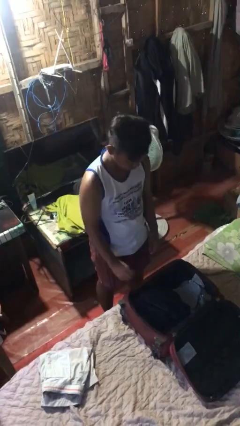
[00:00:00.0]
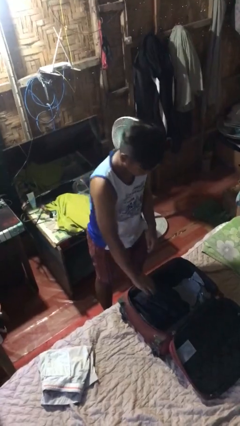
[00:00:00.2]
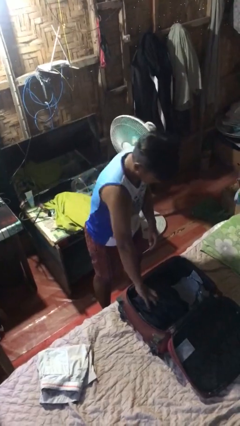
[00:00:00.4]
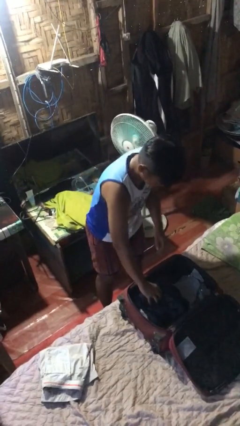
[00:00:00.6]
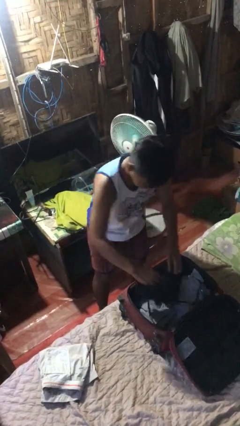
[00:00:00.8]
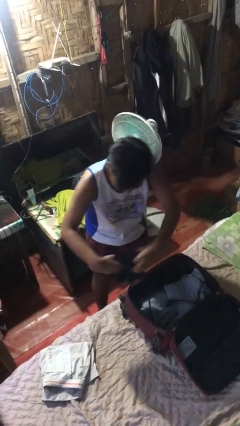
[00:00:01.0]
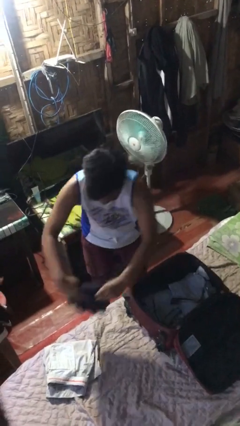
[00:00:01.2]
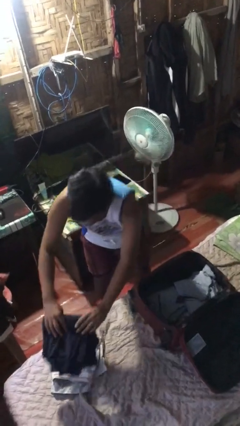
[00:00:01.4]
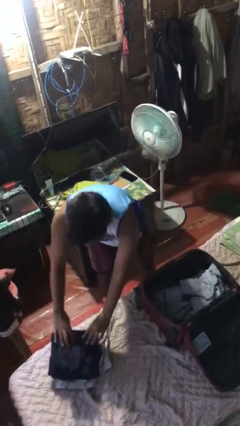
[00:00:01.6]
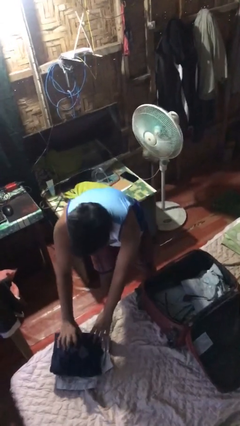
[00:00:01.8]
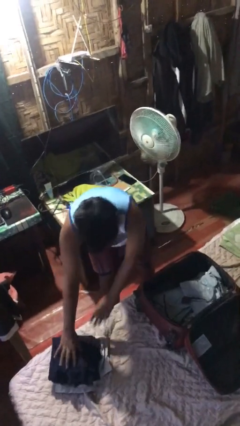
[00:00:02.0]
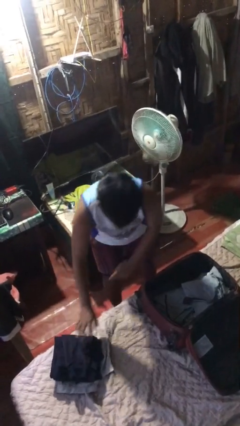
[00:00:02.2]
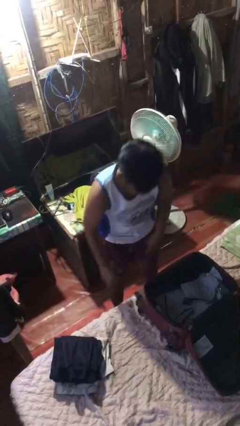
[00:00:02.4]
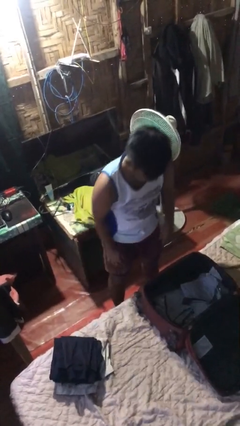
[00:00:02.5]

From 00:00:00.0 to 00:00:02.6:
person unloads clothes from suitcase

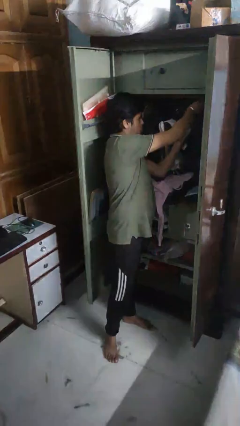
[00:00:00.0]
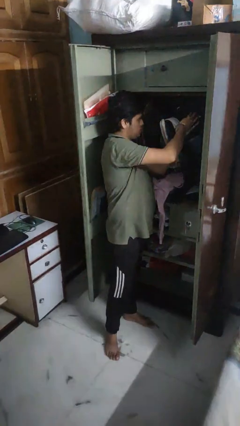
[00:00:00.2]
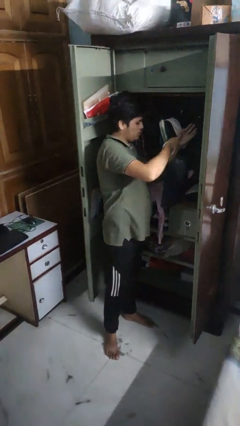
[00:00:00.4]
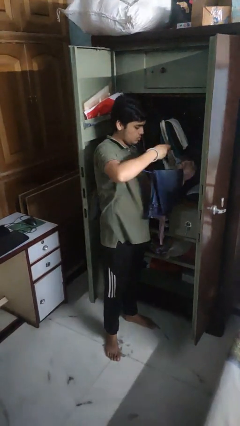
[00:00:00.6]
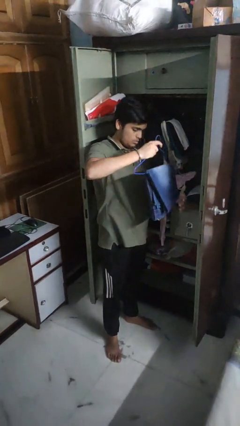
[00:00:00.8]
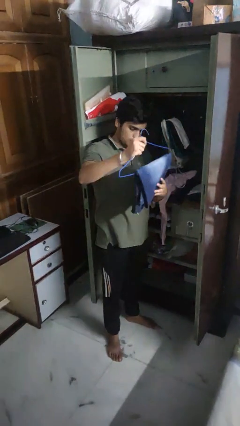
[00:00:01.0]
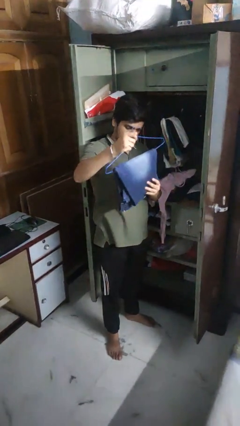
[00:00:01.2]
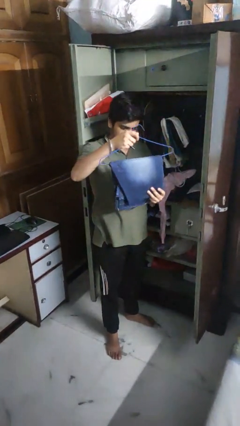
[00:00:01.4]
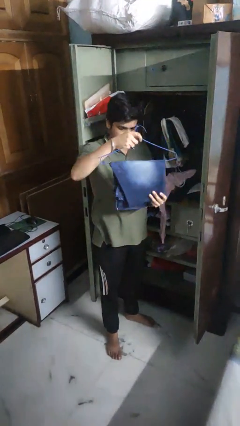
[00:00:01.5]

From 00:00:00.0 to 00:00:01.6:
person takes clothes from closet

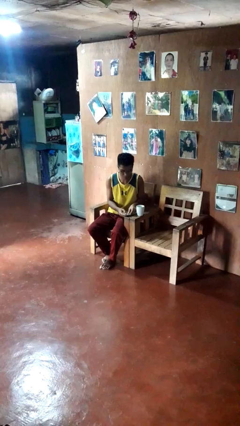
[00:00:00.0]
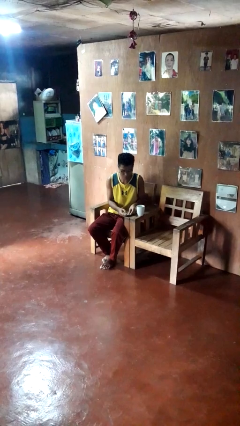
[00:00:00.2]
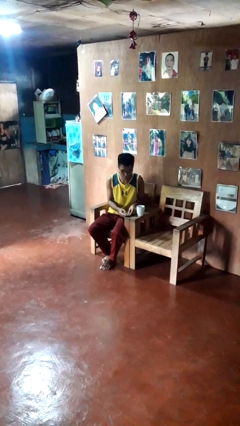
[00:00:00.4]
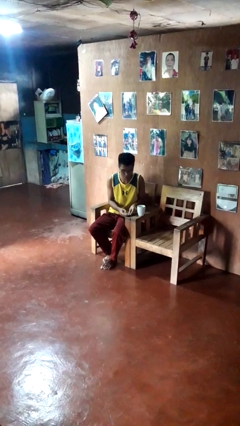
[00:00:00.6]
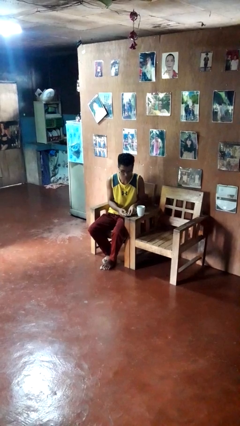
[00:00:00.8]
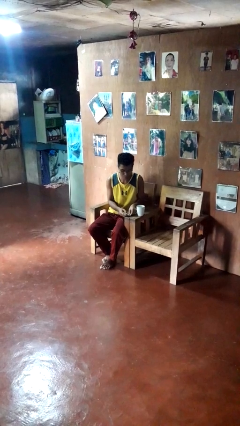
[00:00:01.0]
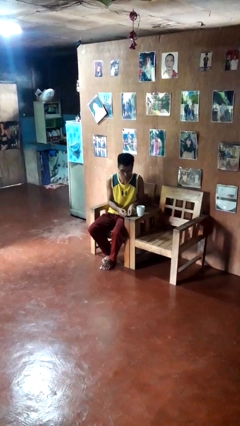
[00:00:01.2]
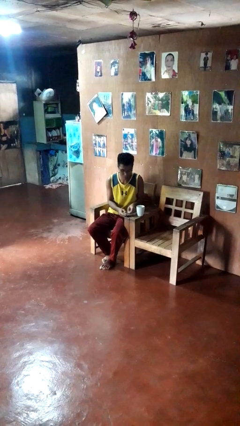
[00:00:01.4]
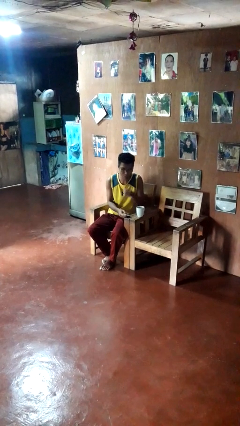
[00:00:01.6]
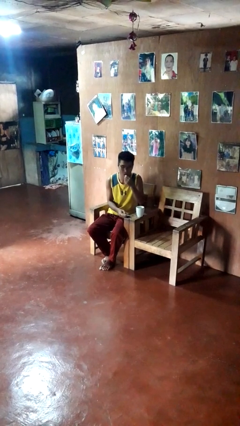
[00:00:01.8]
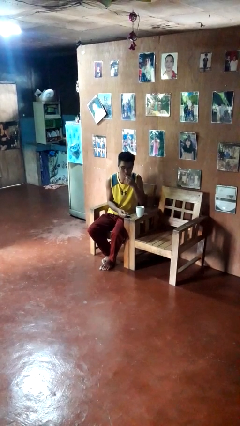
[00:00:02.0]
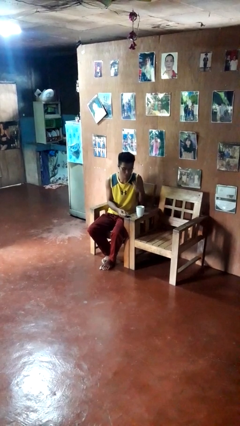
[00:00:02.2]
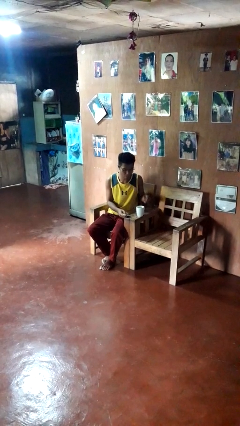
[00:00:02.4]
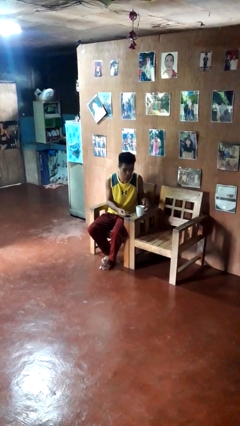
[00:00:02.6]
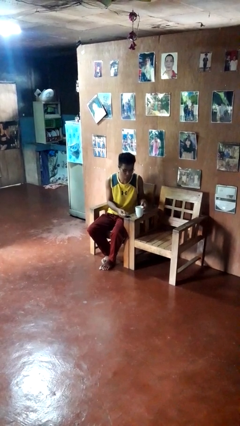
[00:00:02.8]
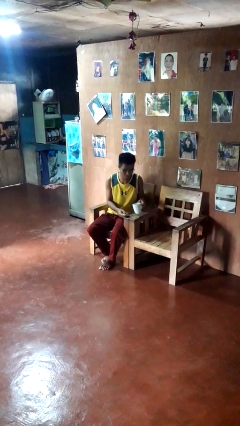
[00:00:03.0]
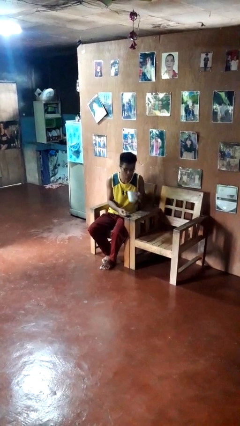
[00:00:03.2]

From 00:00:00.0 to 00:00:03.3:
person takes medicine pills

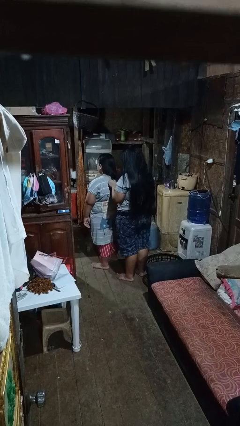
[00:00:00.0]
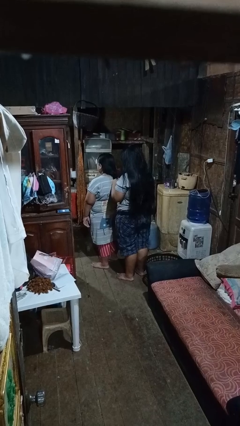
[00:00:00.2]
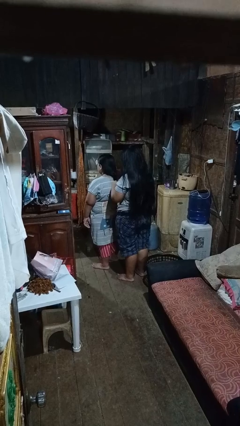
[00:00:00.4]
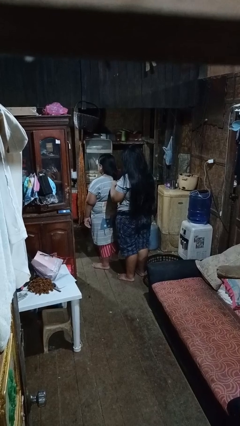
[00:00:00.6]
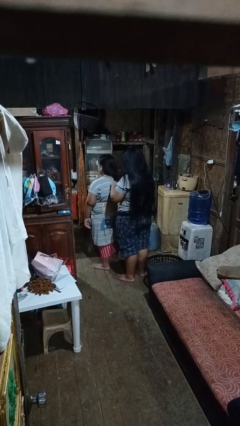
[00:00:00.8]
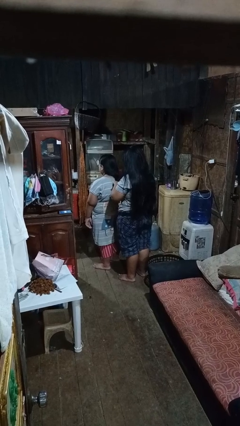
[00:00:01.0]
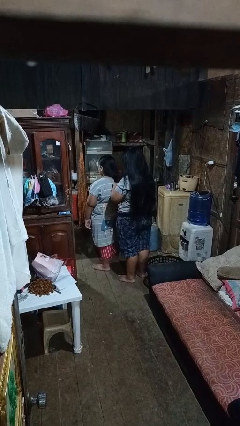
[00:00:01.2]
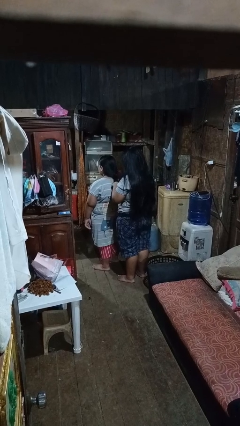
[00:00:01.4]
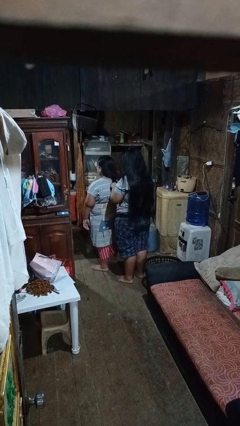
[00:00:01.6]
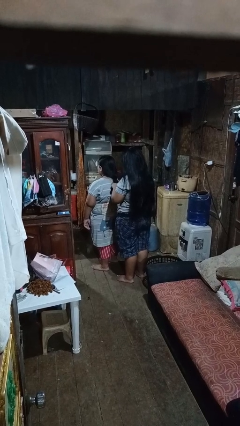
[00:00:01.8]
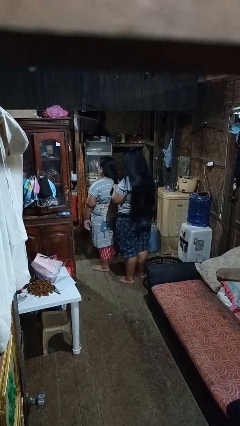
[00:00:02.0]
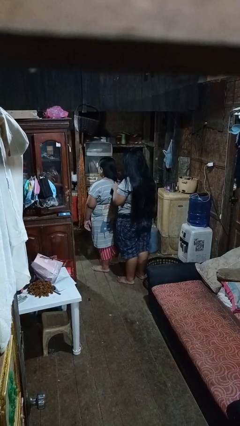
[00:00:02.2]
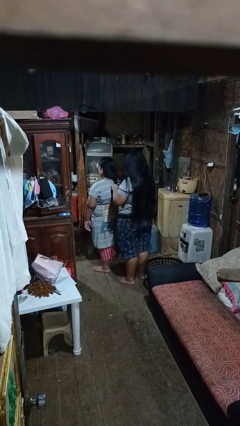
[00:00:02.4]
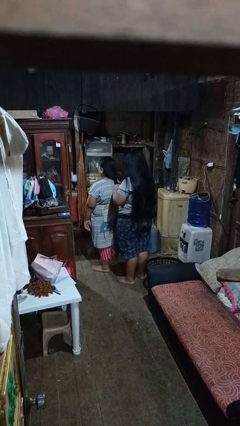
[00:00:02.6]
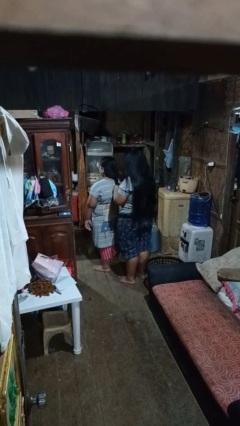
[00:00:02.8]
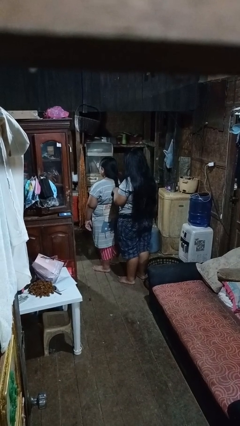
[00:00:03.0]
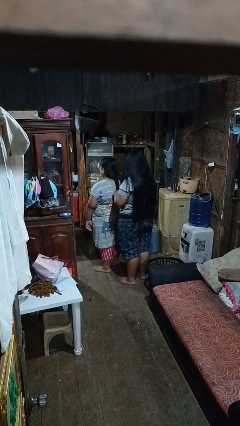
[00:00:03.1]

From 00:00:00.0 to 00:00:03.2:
person braids hair of person

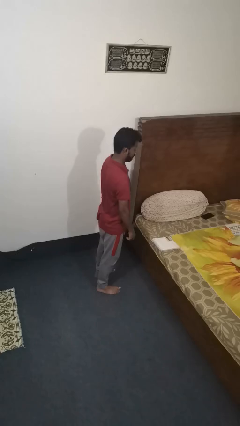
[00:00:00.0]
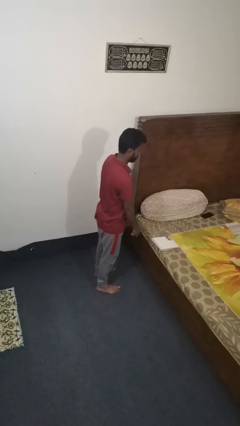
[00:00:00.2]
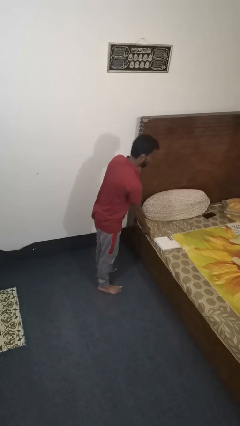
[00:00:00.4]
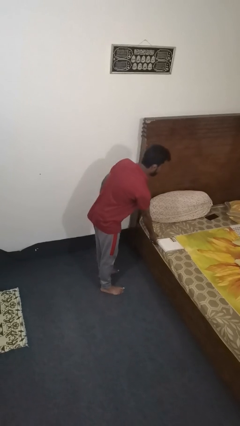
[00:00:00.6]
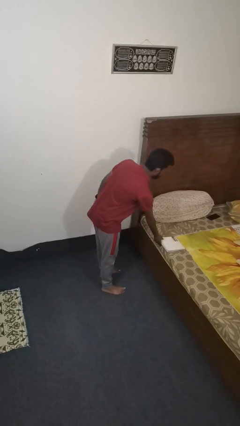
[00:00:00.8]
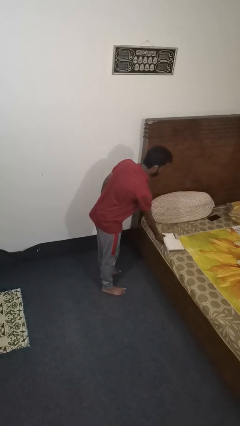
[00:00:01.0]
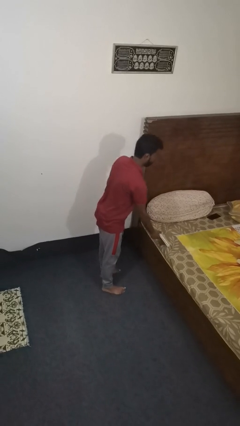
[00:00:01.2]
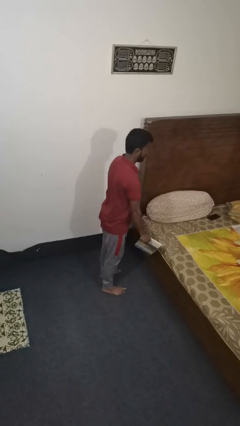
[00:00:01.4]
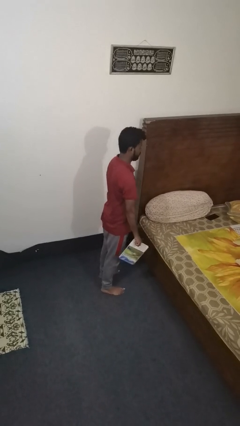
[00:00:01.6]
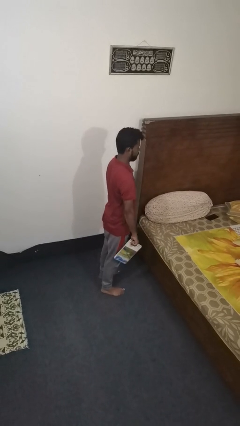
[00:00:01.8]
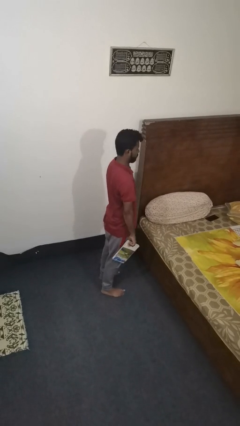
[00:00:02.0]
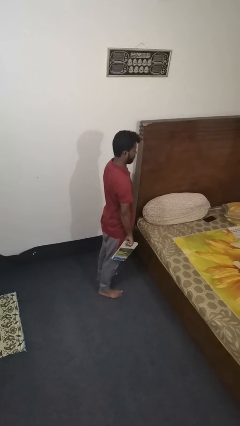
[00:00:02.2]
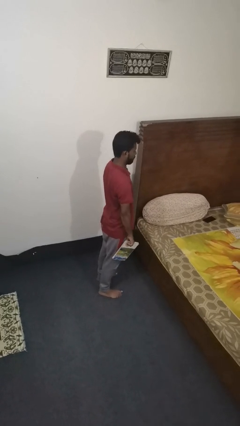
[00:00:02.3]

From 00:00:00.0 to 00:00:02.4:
person picks up object from bed

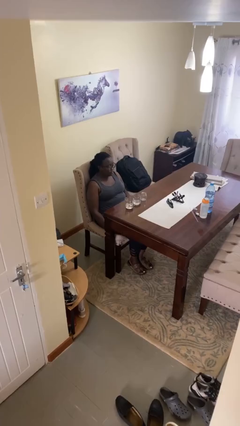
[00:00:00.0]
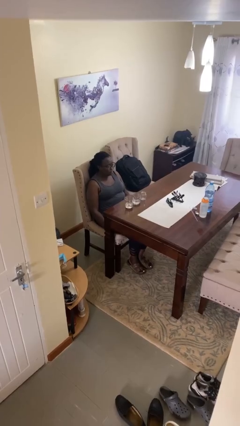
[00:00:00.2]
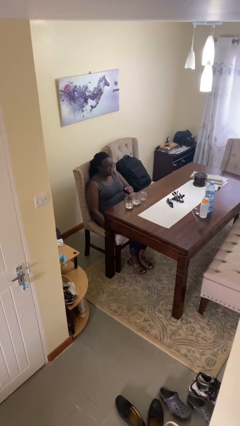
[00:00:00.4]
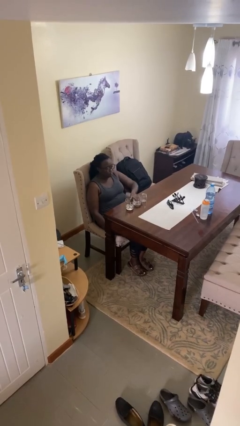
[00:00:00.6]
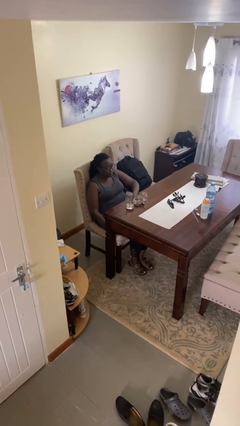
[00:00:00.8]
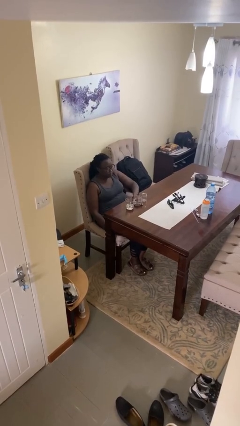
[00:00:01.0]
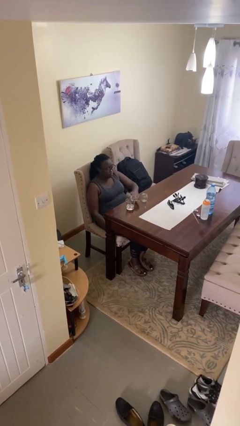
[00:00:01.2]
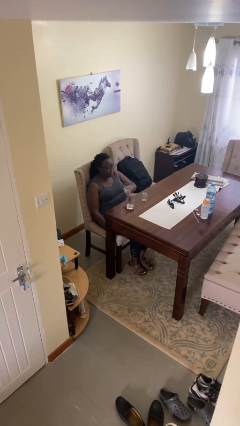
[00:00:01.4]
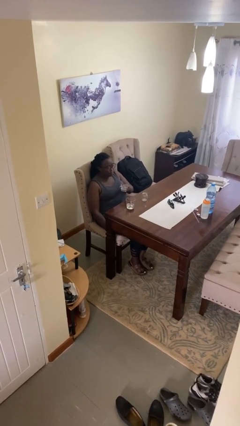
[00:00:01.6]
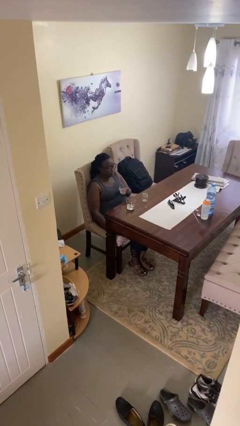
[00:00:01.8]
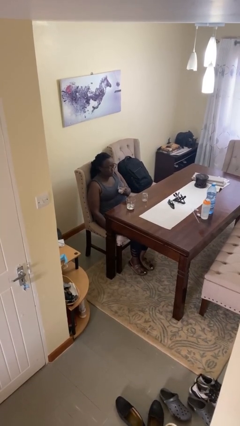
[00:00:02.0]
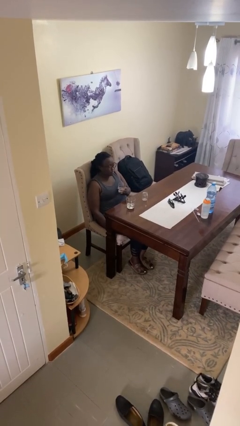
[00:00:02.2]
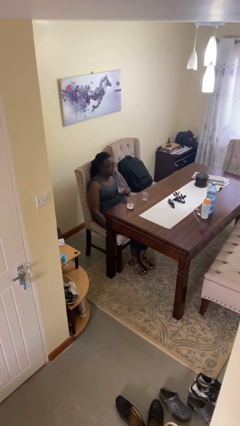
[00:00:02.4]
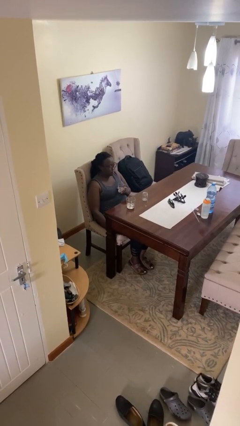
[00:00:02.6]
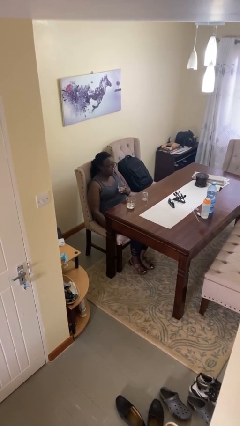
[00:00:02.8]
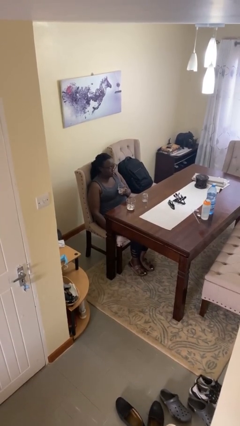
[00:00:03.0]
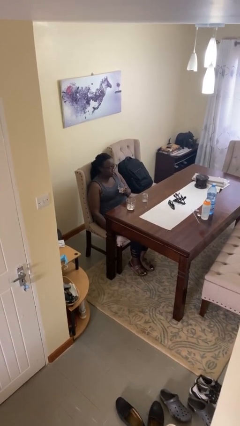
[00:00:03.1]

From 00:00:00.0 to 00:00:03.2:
person picks up object from table

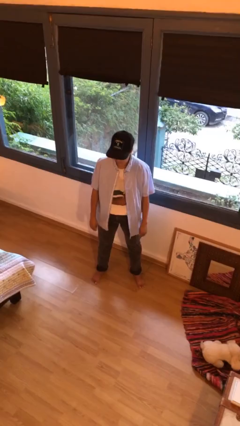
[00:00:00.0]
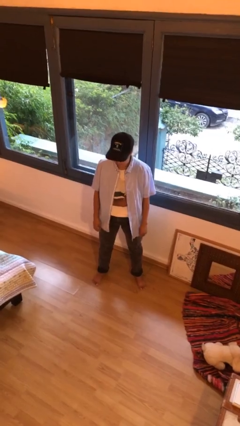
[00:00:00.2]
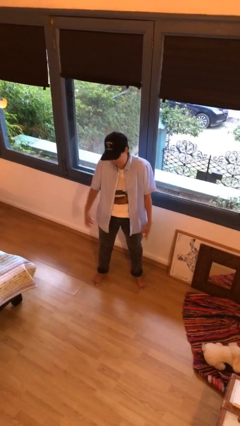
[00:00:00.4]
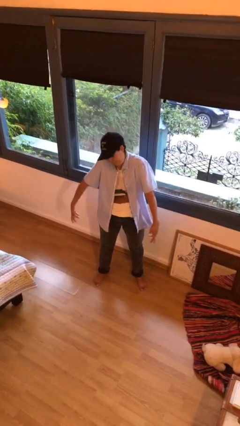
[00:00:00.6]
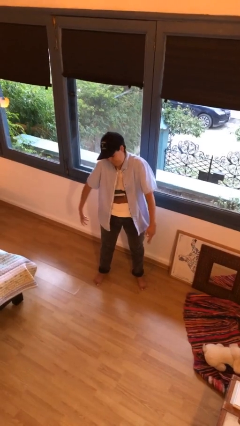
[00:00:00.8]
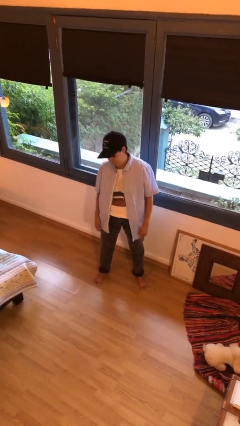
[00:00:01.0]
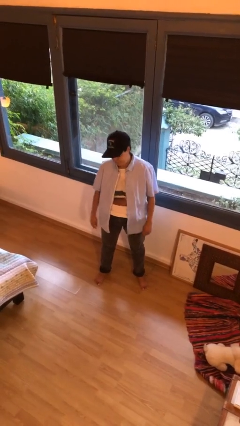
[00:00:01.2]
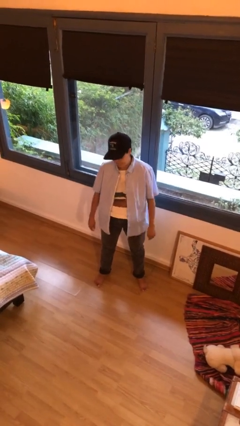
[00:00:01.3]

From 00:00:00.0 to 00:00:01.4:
person shrugs
